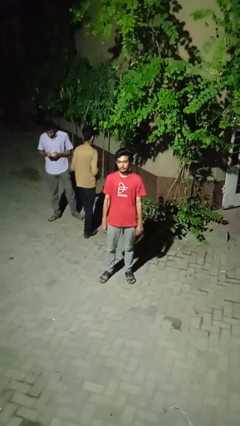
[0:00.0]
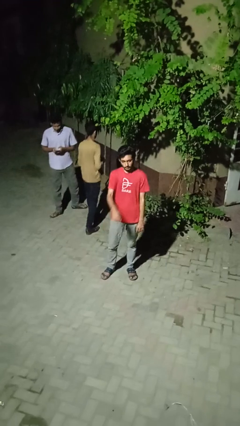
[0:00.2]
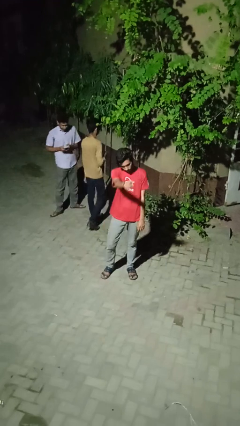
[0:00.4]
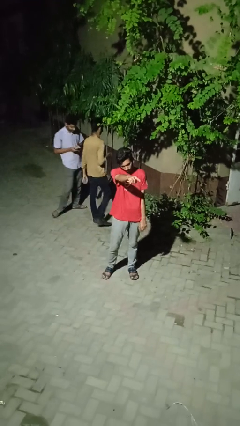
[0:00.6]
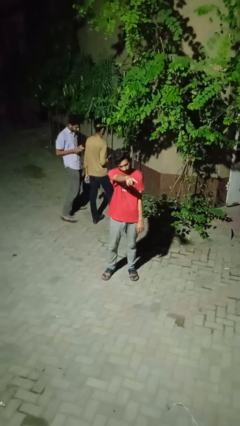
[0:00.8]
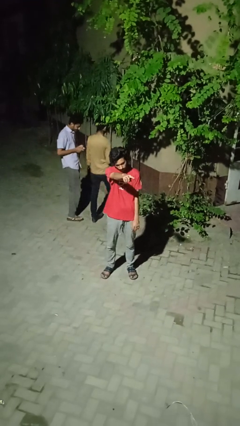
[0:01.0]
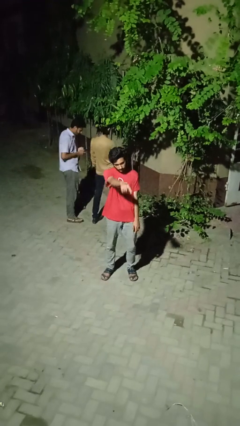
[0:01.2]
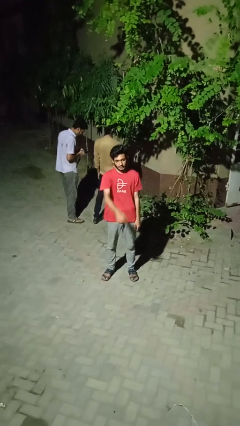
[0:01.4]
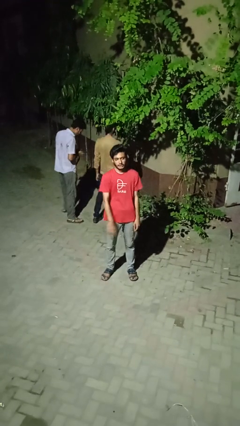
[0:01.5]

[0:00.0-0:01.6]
person points at person

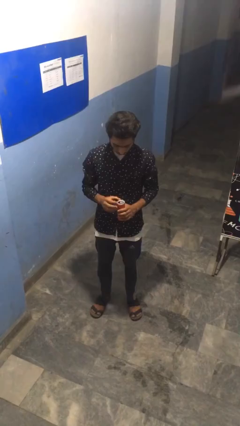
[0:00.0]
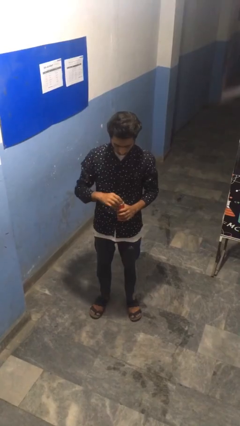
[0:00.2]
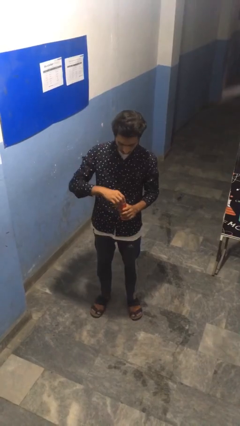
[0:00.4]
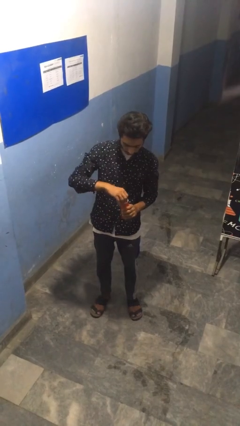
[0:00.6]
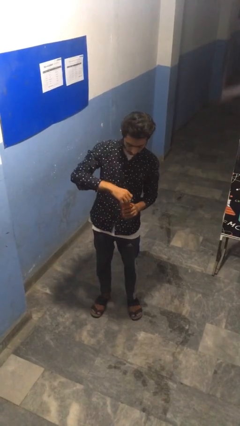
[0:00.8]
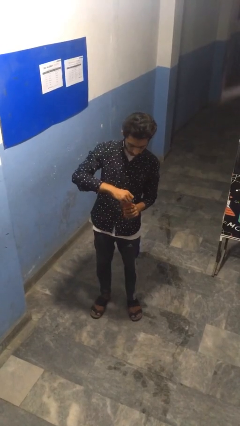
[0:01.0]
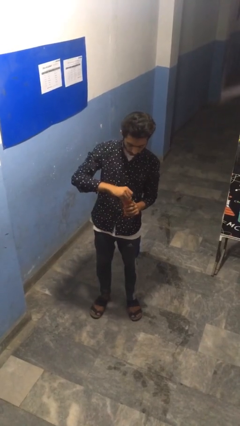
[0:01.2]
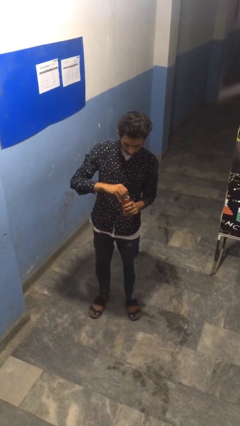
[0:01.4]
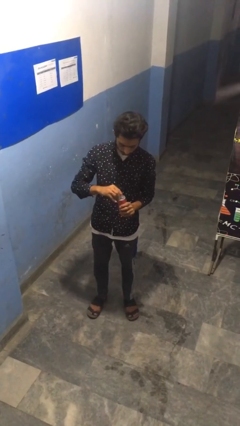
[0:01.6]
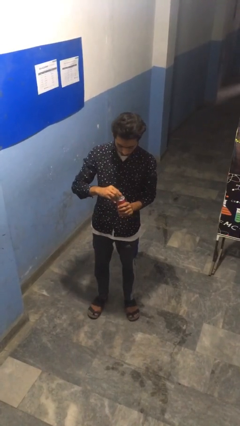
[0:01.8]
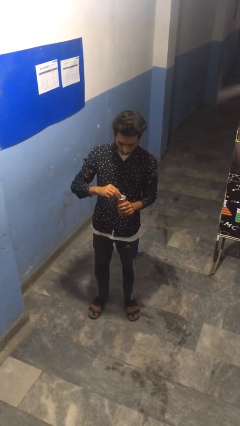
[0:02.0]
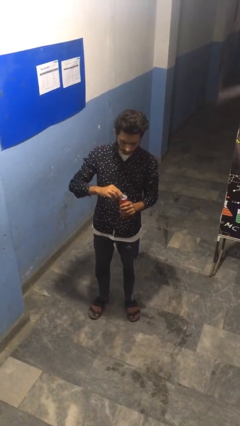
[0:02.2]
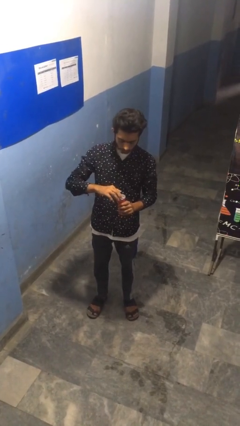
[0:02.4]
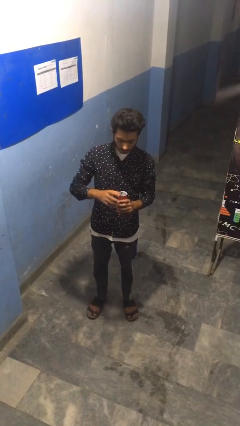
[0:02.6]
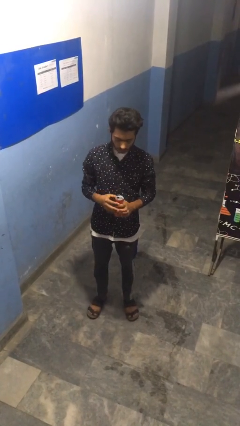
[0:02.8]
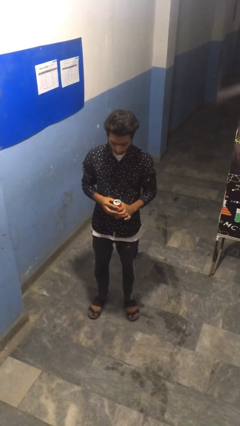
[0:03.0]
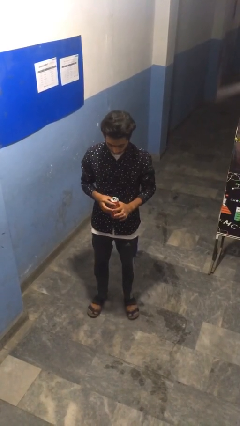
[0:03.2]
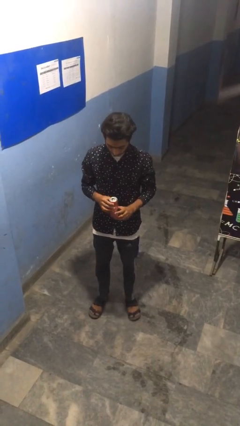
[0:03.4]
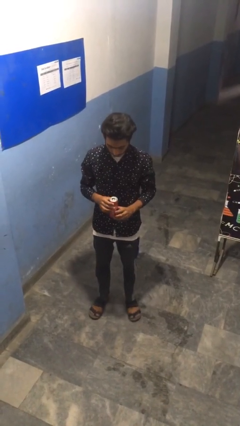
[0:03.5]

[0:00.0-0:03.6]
person opens beverage can

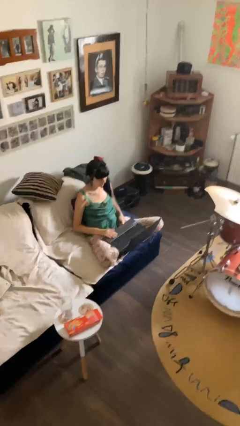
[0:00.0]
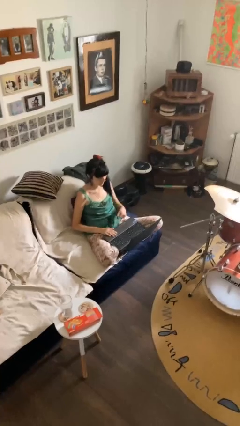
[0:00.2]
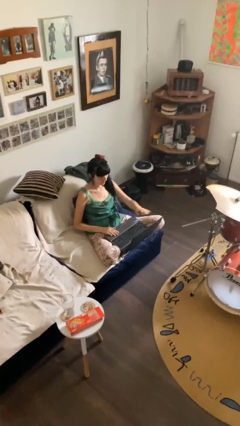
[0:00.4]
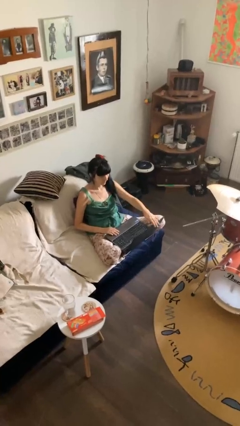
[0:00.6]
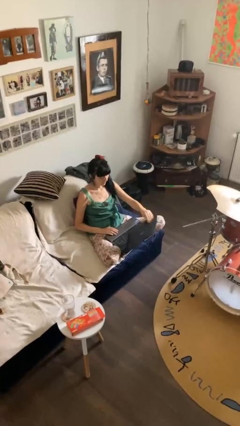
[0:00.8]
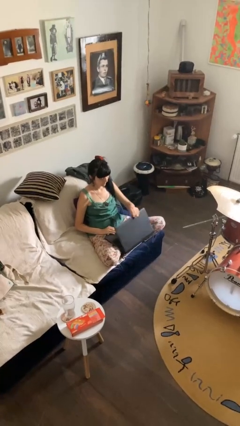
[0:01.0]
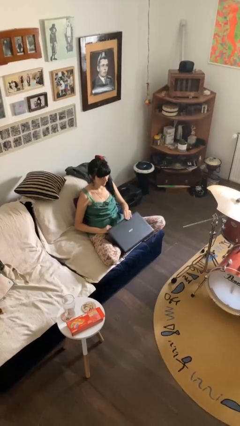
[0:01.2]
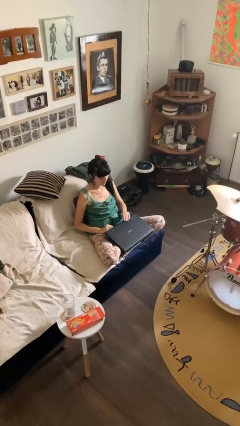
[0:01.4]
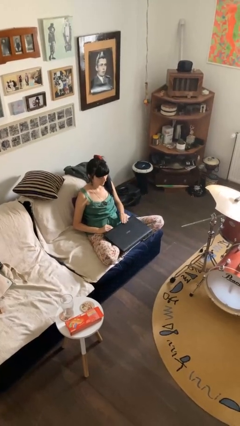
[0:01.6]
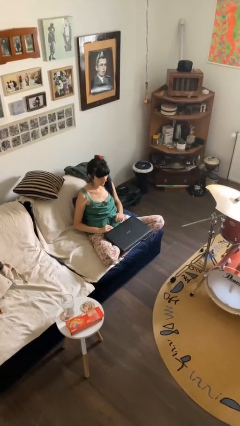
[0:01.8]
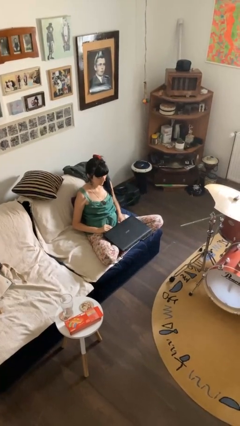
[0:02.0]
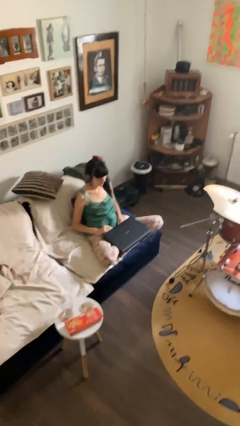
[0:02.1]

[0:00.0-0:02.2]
person closes laptop

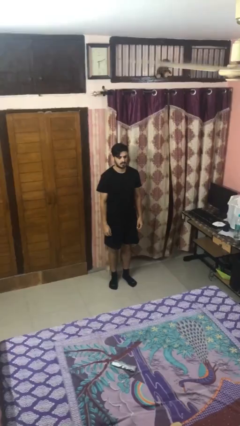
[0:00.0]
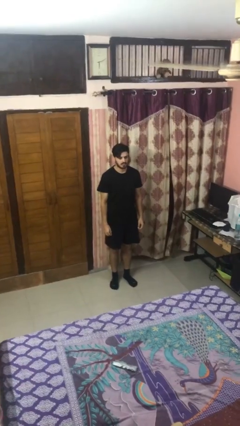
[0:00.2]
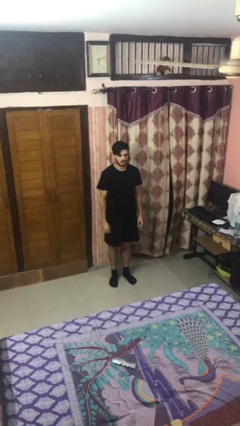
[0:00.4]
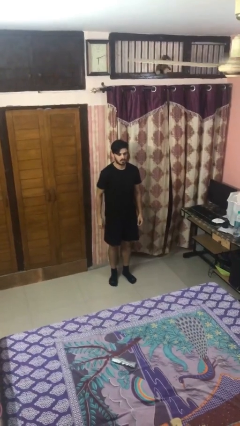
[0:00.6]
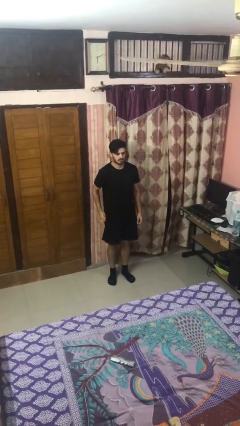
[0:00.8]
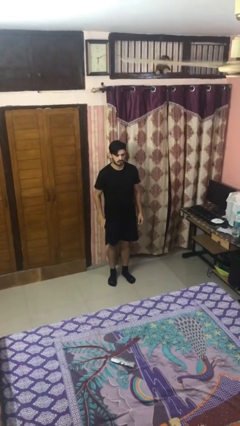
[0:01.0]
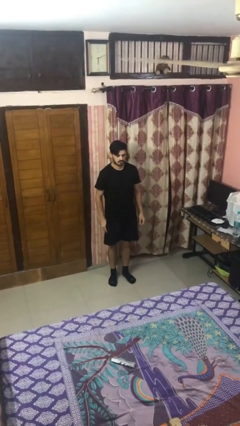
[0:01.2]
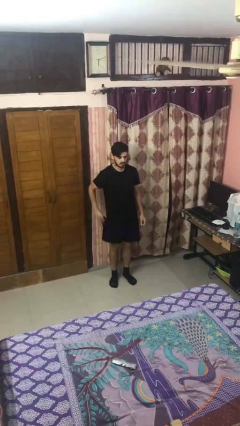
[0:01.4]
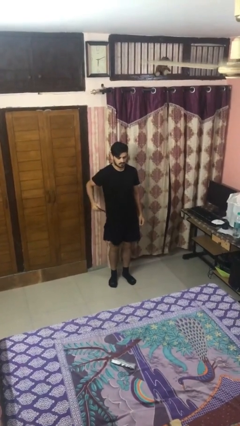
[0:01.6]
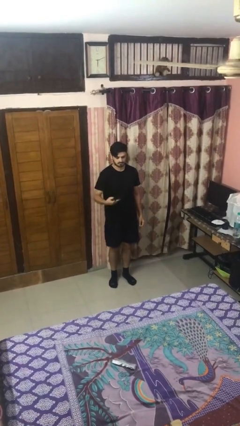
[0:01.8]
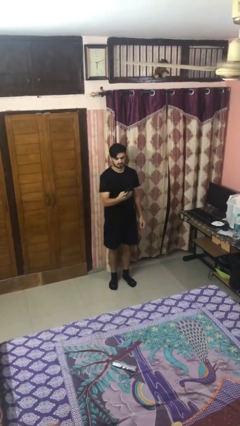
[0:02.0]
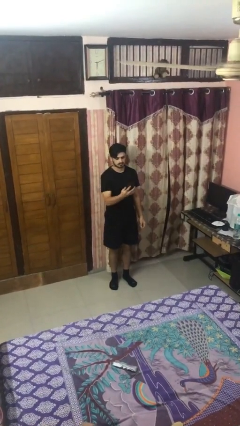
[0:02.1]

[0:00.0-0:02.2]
person takes phone from pocket

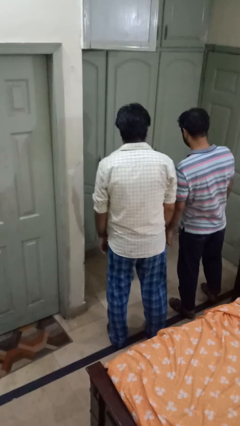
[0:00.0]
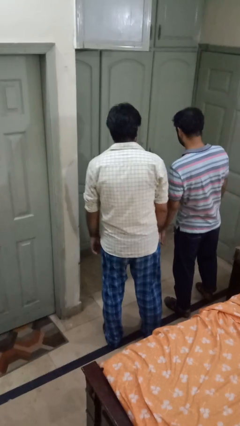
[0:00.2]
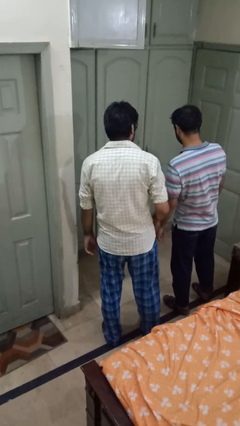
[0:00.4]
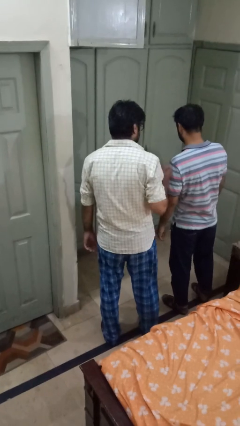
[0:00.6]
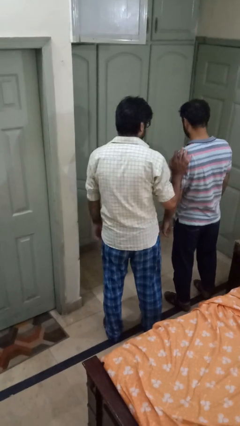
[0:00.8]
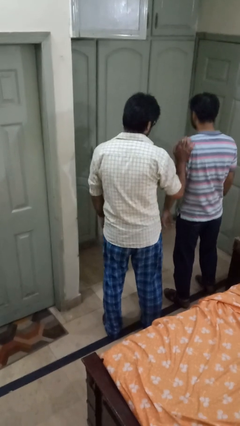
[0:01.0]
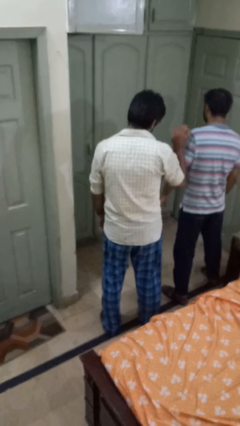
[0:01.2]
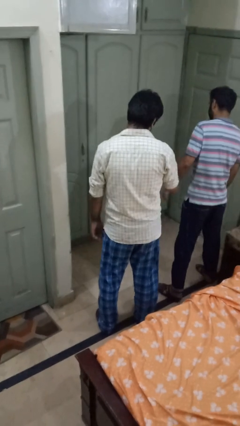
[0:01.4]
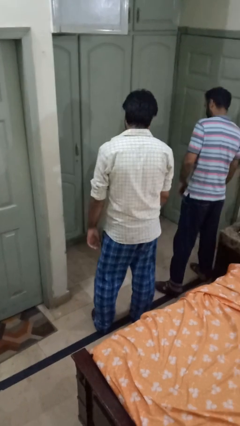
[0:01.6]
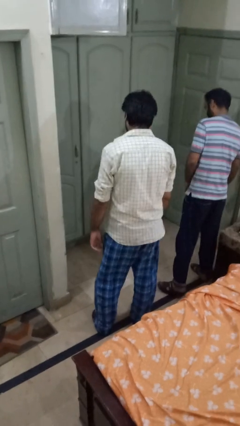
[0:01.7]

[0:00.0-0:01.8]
person shoves person

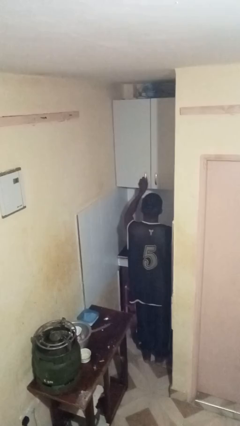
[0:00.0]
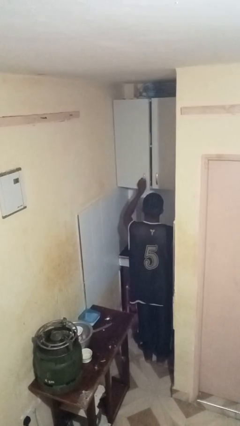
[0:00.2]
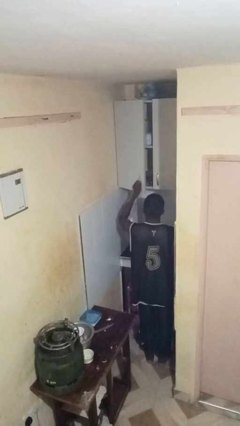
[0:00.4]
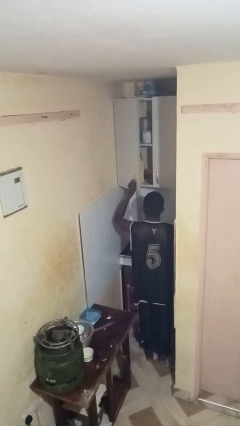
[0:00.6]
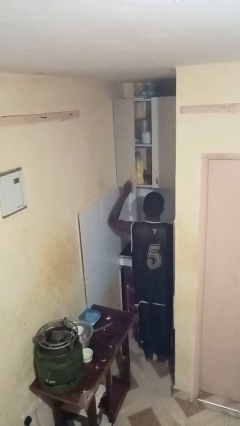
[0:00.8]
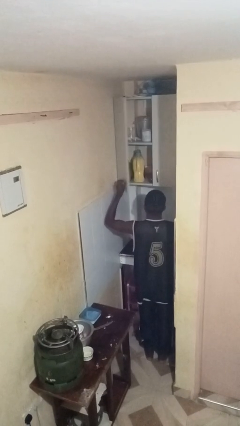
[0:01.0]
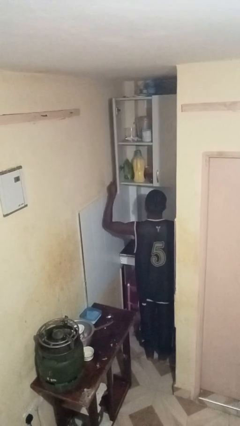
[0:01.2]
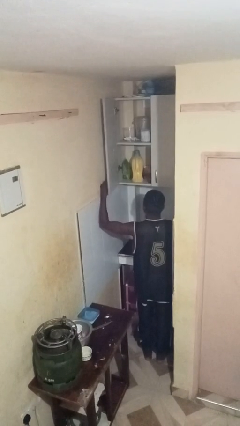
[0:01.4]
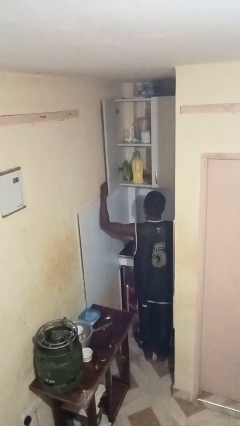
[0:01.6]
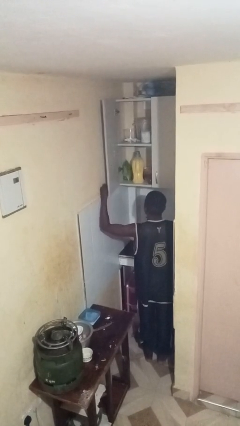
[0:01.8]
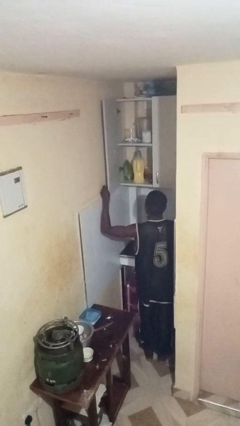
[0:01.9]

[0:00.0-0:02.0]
person opens cabinet

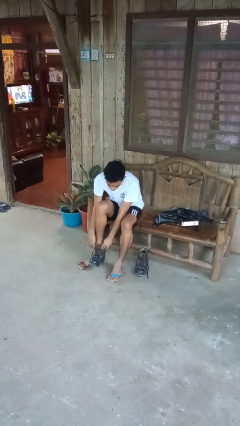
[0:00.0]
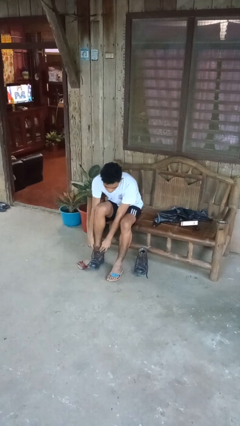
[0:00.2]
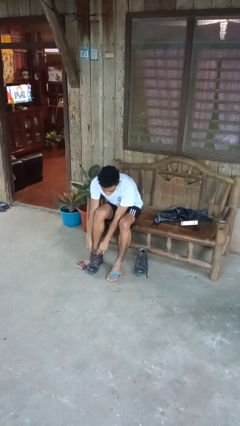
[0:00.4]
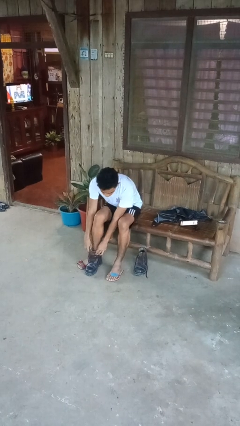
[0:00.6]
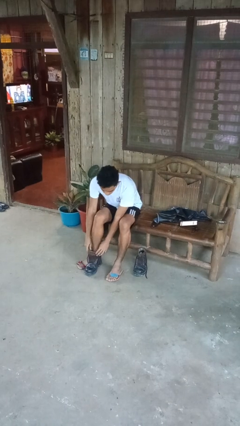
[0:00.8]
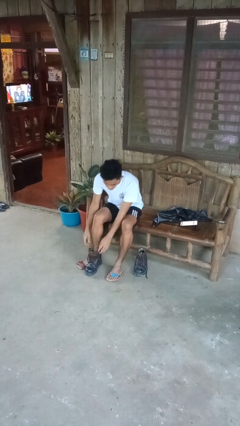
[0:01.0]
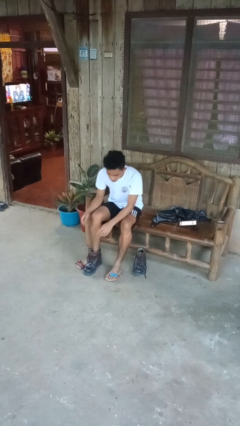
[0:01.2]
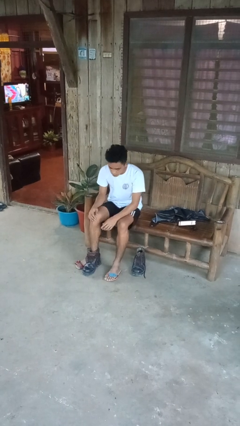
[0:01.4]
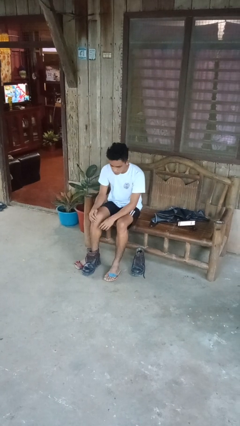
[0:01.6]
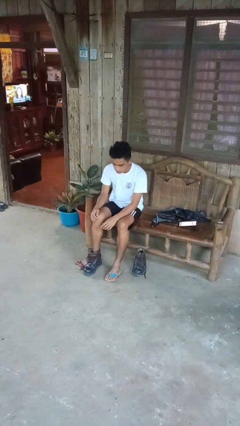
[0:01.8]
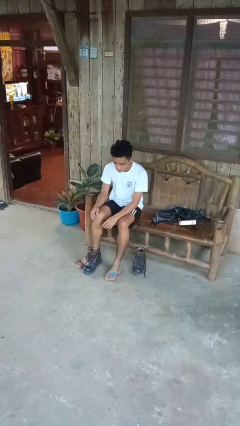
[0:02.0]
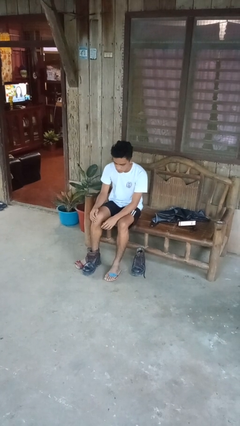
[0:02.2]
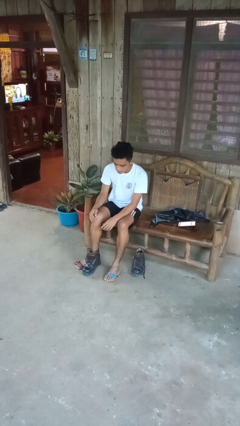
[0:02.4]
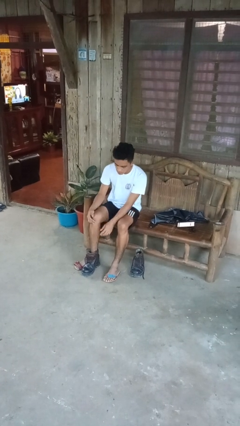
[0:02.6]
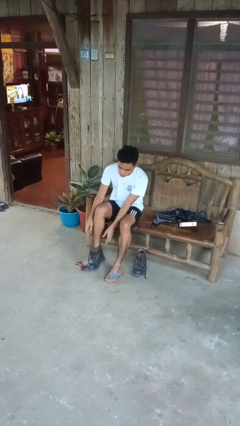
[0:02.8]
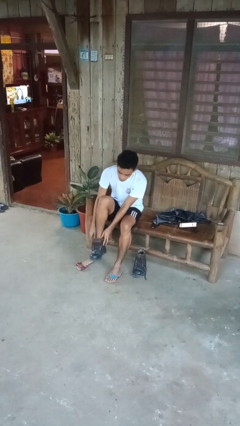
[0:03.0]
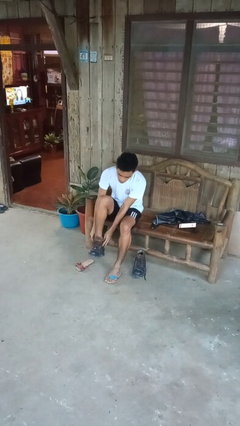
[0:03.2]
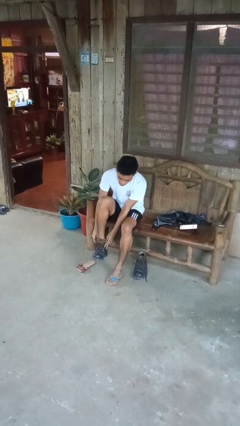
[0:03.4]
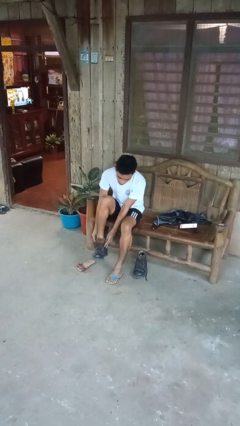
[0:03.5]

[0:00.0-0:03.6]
person puts on boots
